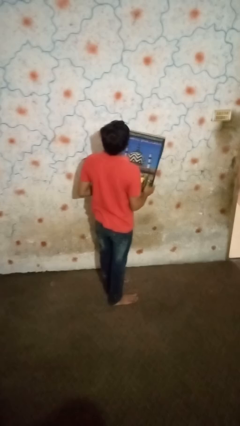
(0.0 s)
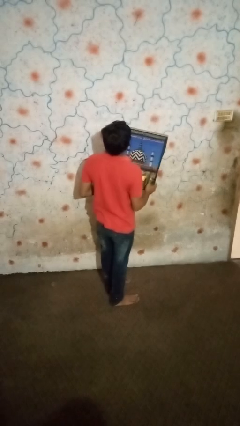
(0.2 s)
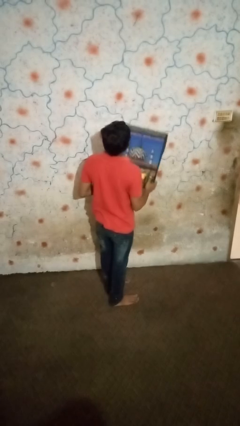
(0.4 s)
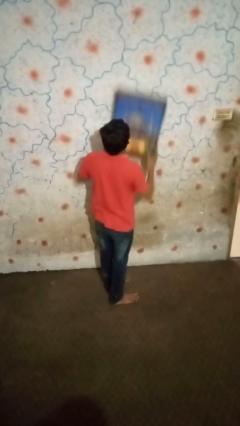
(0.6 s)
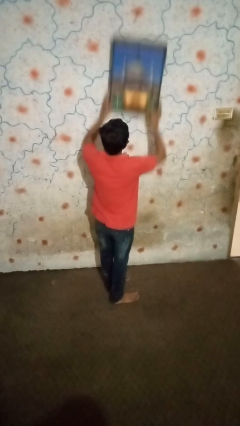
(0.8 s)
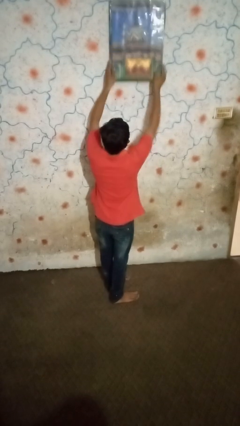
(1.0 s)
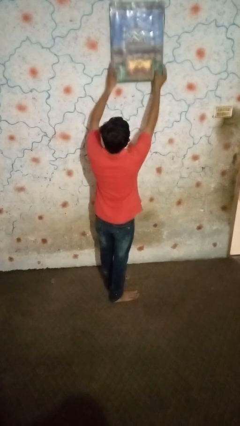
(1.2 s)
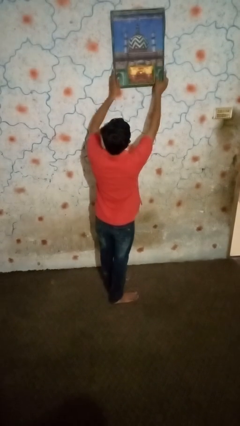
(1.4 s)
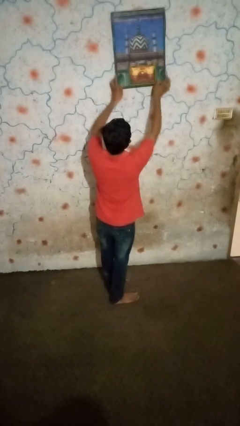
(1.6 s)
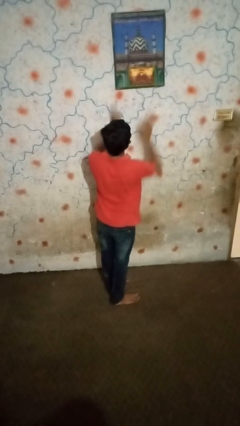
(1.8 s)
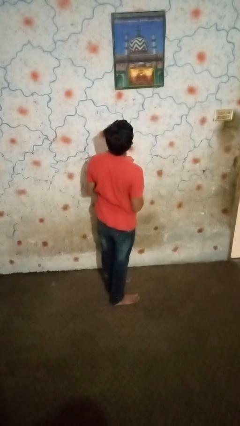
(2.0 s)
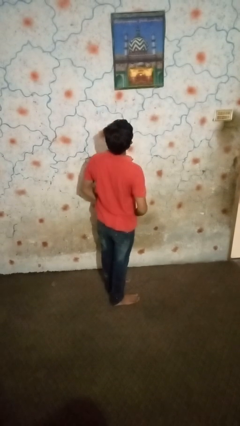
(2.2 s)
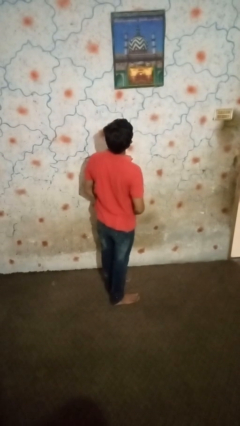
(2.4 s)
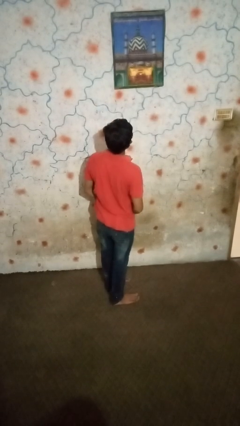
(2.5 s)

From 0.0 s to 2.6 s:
person puts up picture frame

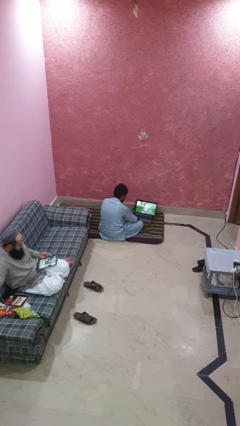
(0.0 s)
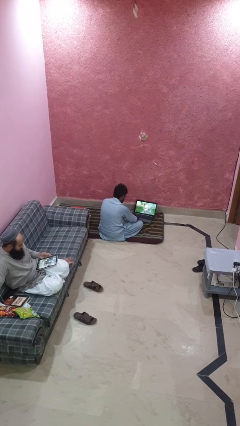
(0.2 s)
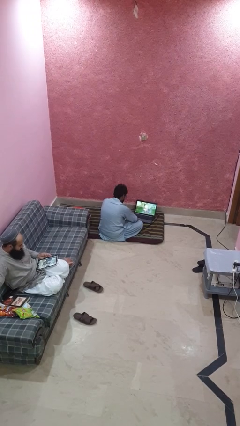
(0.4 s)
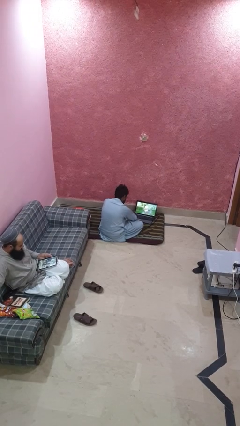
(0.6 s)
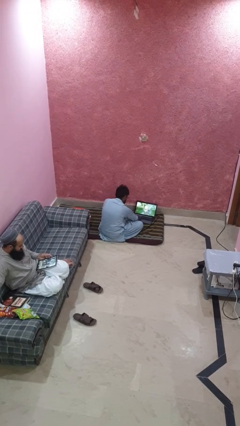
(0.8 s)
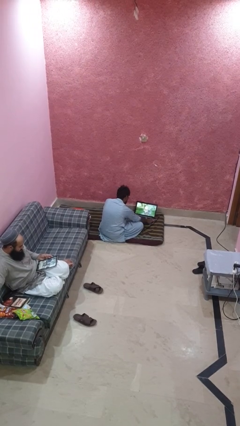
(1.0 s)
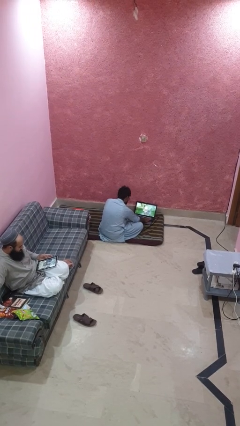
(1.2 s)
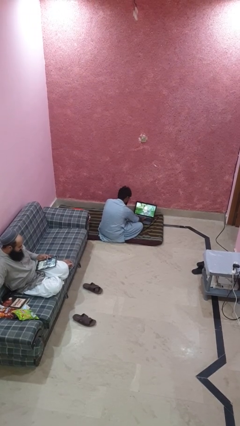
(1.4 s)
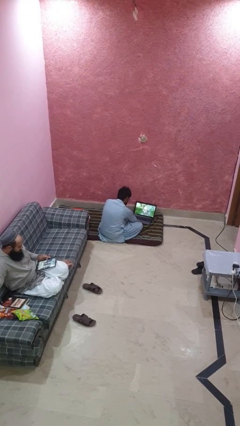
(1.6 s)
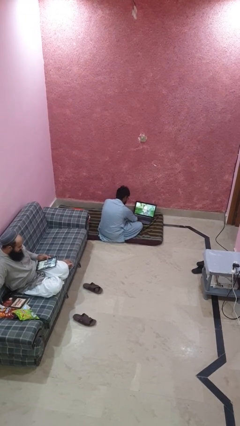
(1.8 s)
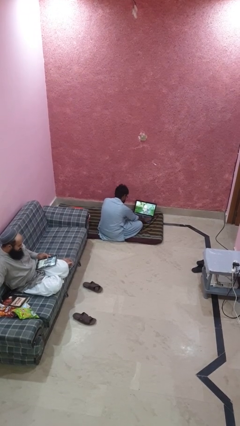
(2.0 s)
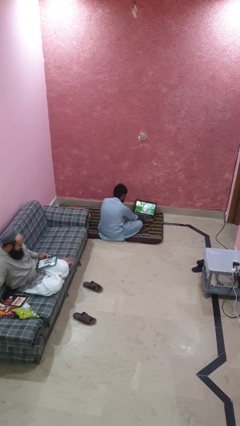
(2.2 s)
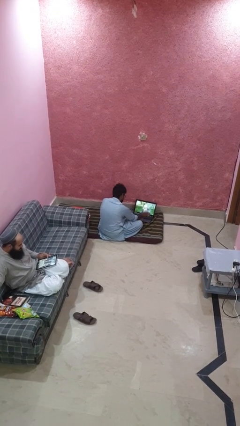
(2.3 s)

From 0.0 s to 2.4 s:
person waves hand over object

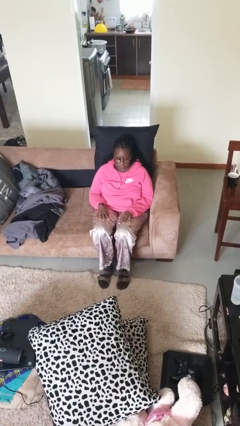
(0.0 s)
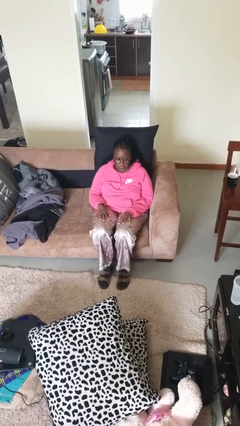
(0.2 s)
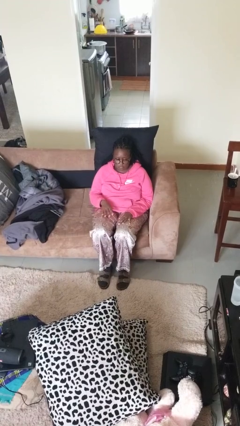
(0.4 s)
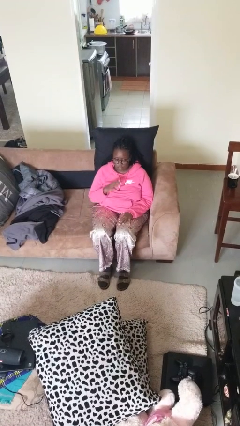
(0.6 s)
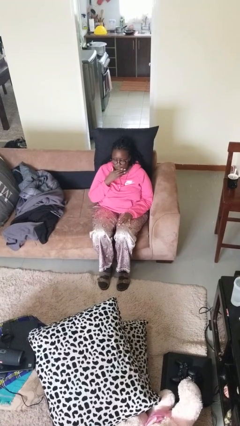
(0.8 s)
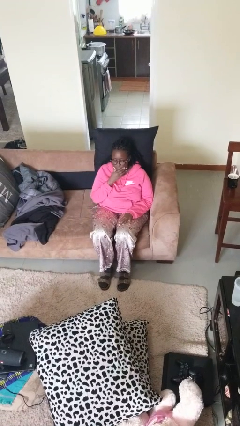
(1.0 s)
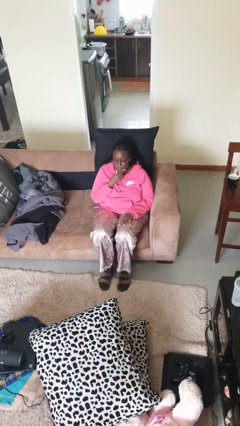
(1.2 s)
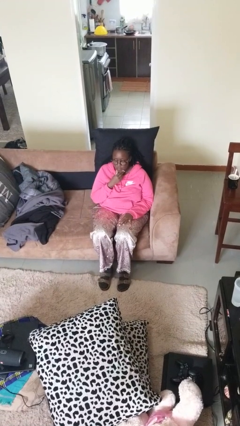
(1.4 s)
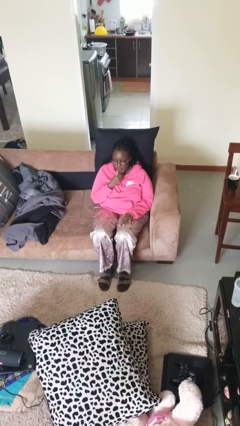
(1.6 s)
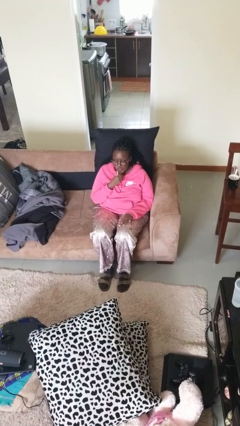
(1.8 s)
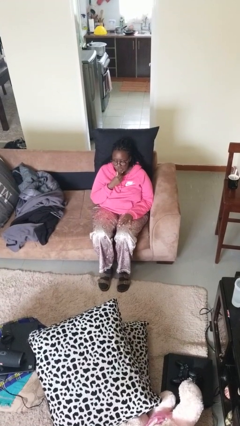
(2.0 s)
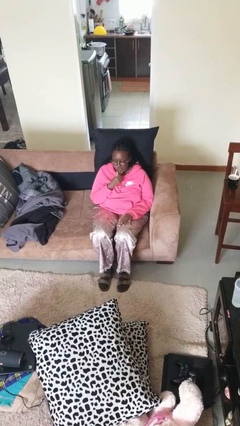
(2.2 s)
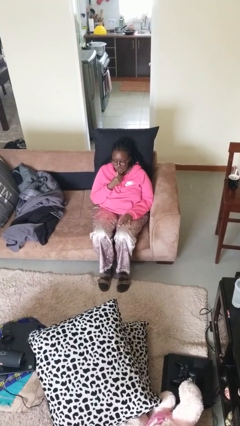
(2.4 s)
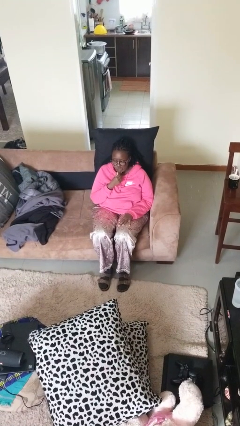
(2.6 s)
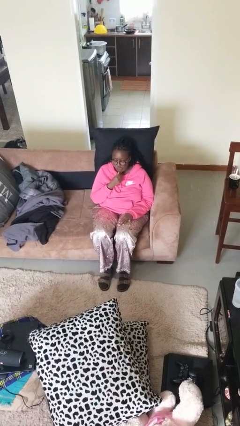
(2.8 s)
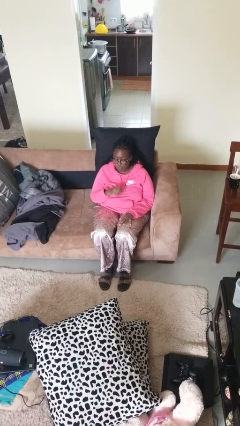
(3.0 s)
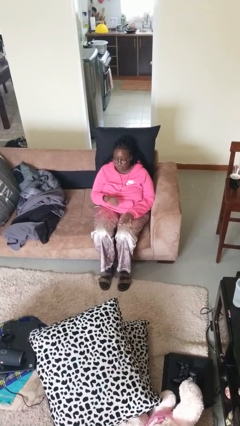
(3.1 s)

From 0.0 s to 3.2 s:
person strokes chin

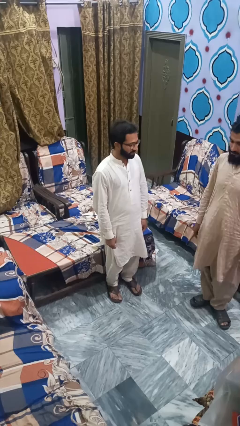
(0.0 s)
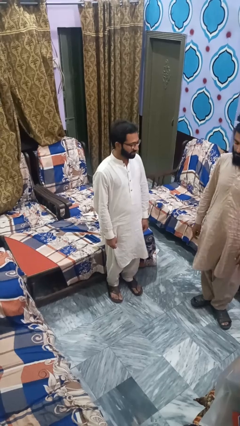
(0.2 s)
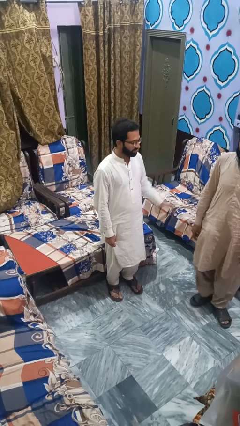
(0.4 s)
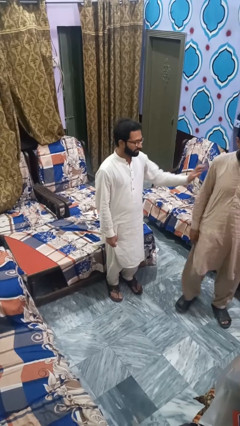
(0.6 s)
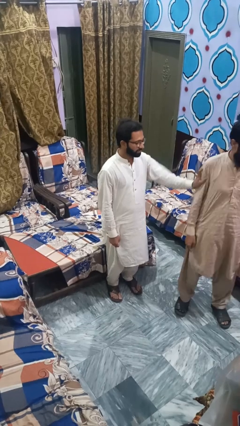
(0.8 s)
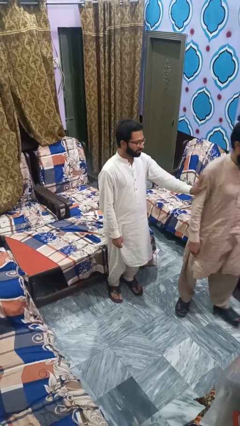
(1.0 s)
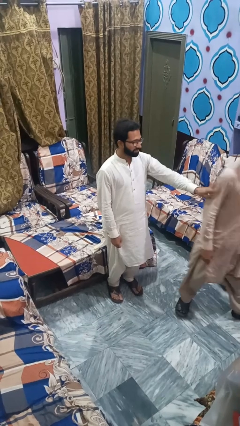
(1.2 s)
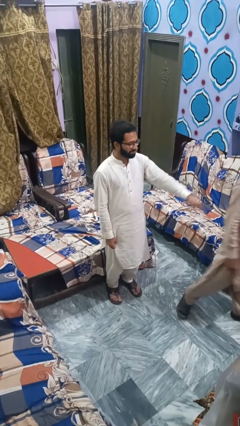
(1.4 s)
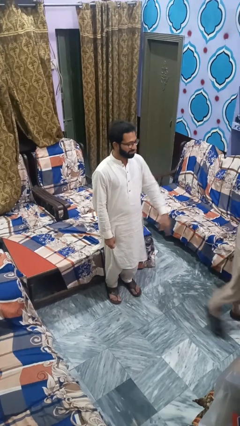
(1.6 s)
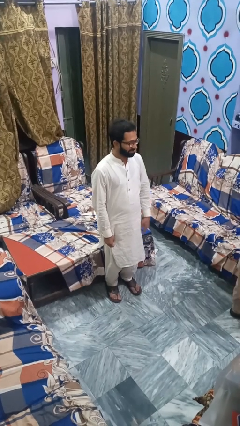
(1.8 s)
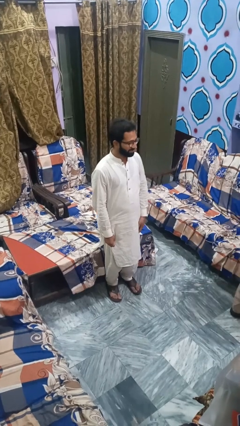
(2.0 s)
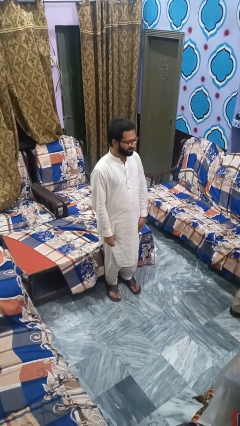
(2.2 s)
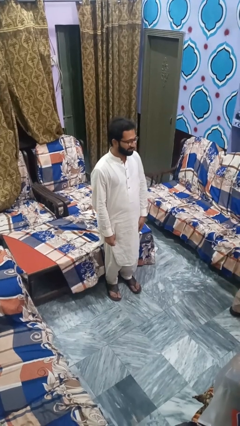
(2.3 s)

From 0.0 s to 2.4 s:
person shoves person

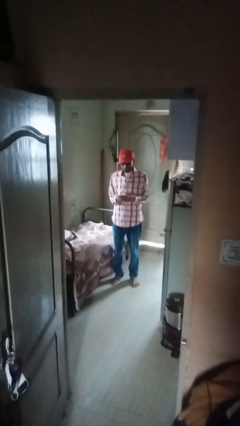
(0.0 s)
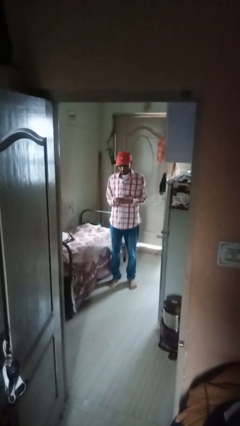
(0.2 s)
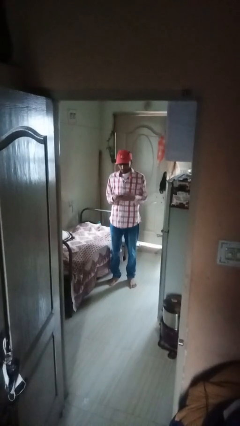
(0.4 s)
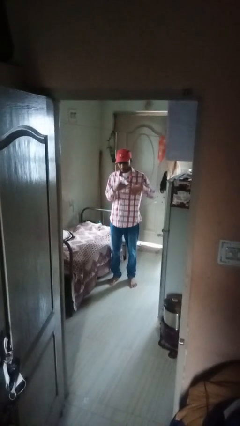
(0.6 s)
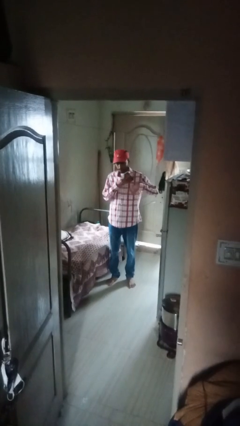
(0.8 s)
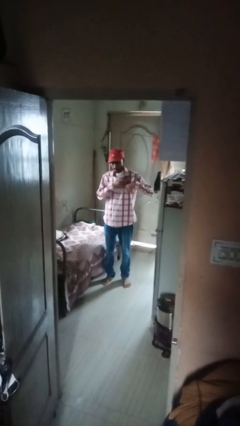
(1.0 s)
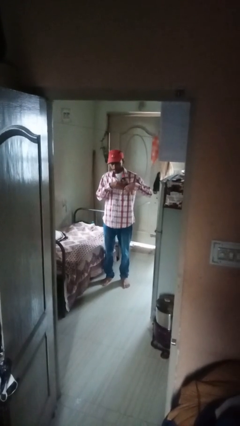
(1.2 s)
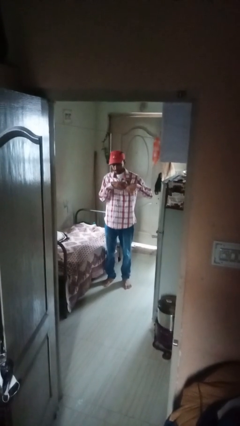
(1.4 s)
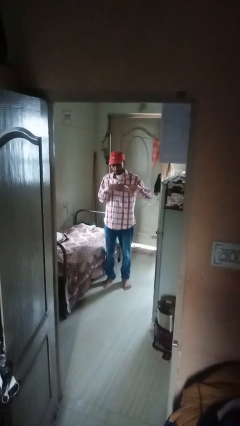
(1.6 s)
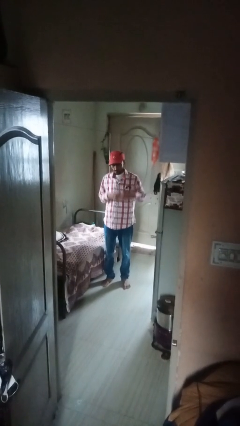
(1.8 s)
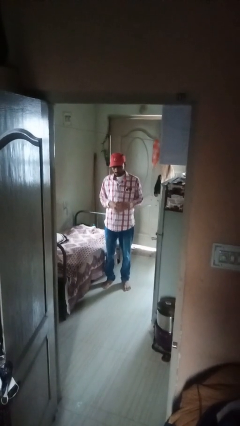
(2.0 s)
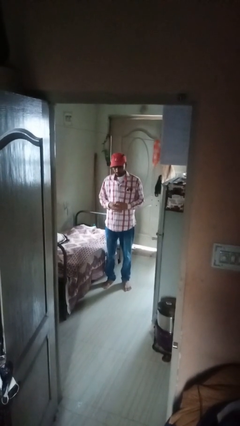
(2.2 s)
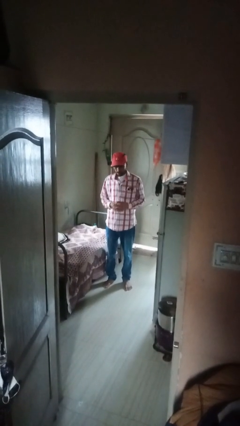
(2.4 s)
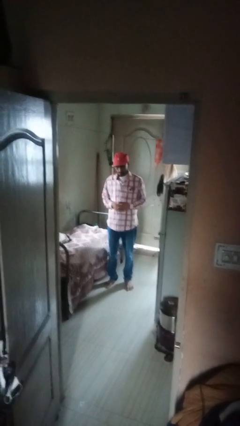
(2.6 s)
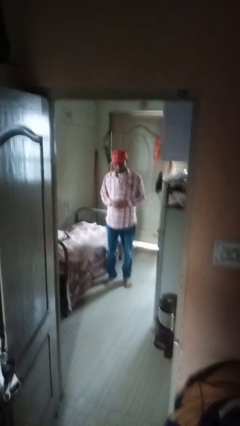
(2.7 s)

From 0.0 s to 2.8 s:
person puts phone into pocket

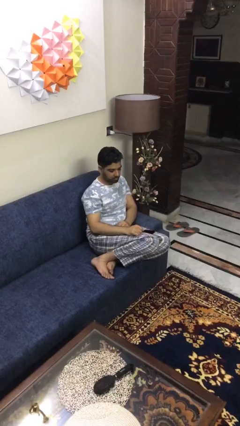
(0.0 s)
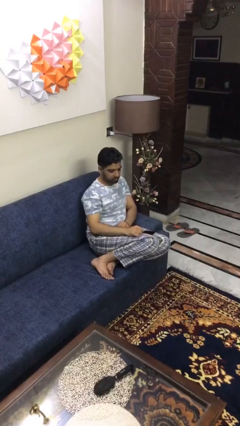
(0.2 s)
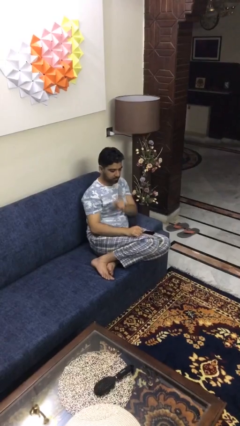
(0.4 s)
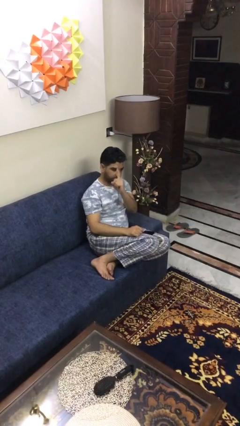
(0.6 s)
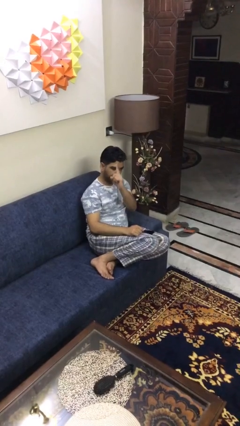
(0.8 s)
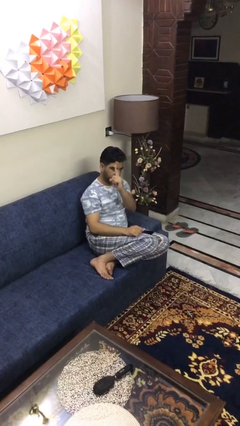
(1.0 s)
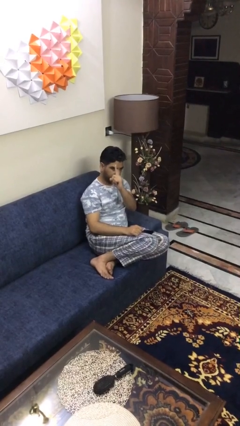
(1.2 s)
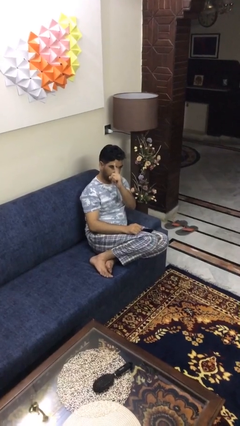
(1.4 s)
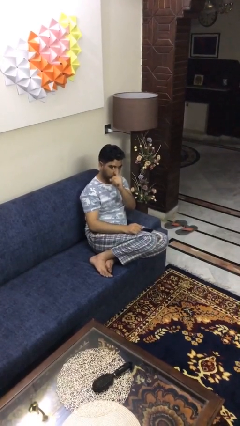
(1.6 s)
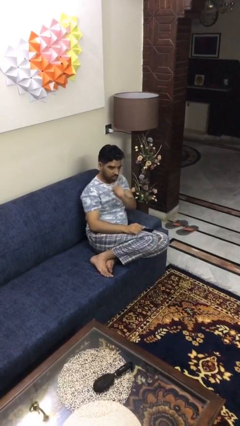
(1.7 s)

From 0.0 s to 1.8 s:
person gestures number one

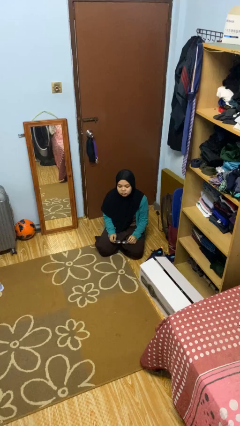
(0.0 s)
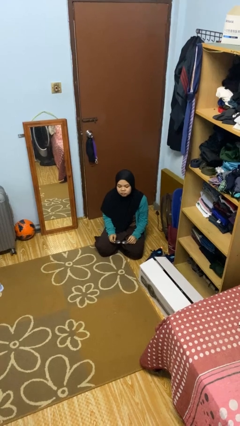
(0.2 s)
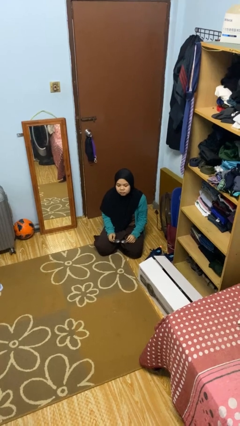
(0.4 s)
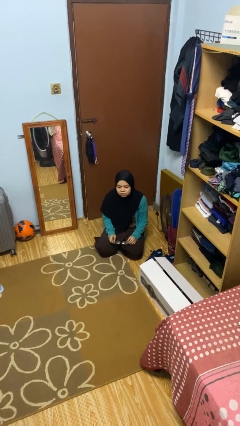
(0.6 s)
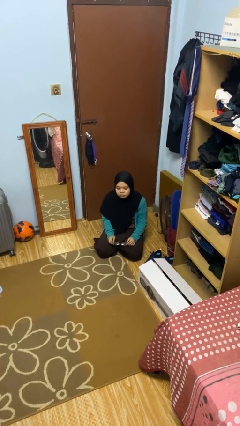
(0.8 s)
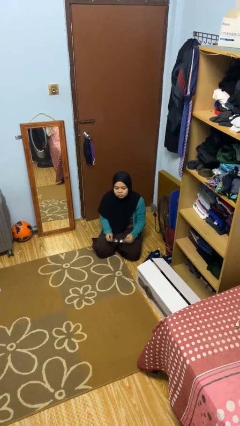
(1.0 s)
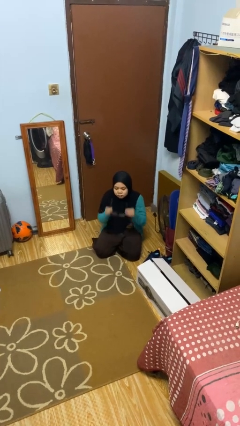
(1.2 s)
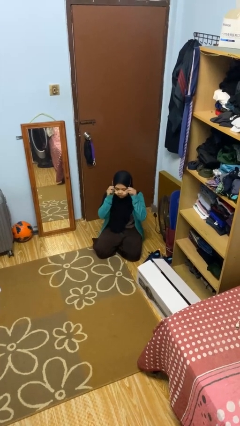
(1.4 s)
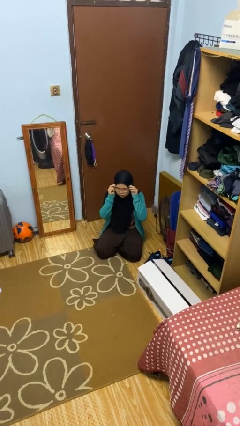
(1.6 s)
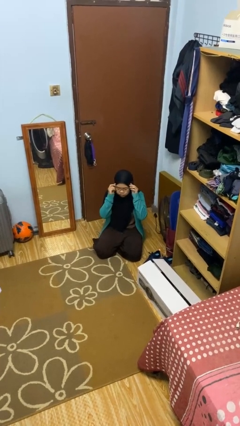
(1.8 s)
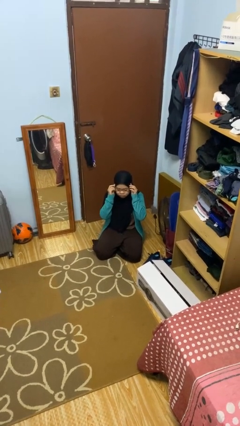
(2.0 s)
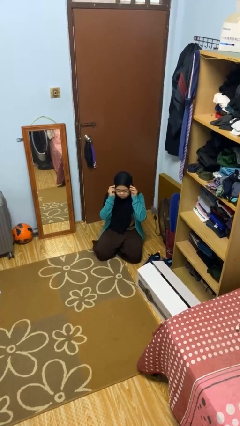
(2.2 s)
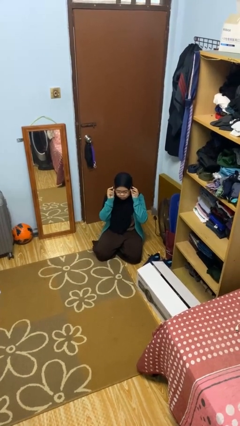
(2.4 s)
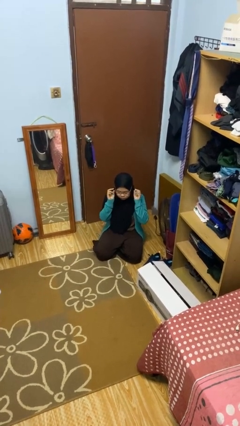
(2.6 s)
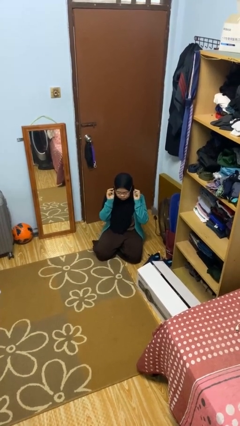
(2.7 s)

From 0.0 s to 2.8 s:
person puts on glasses
